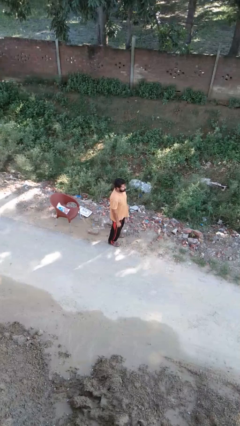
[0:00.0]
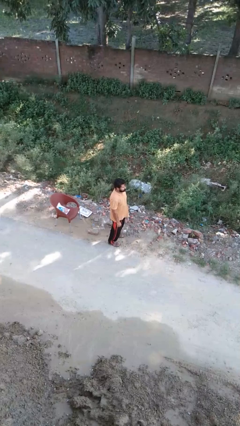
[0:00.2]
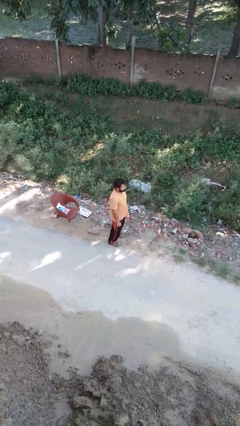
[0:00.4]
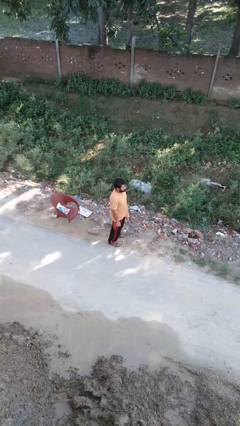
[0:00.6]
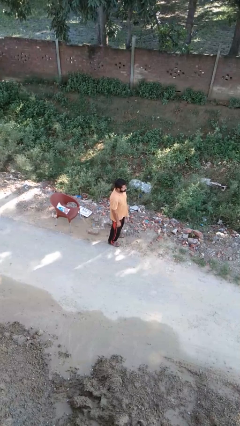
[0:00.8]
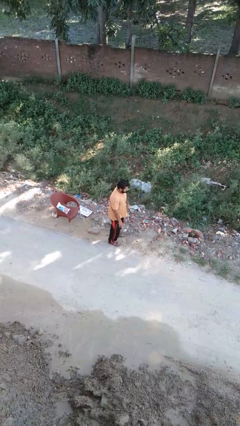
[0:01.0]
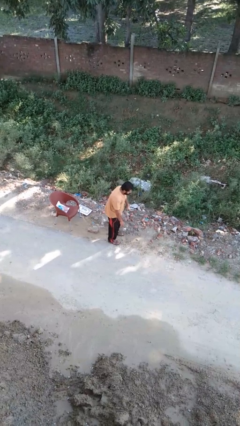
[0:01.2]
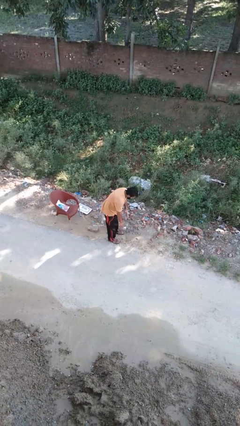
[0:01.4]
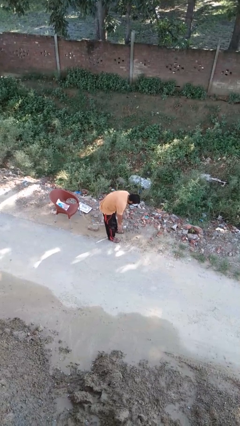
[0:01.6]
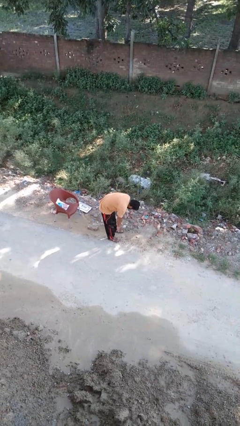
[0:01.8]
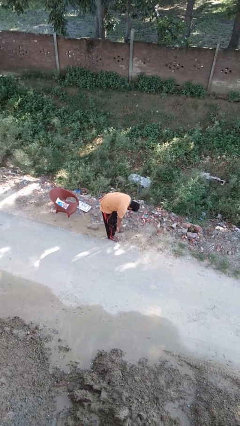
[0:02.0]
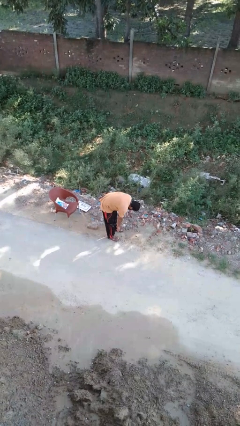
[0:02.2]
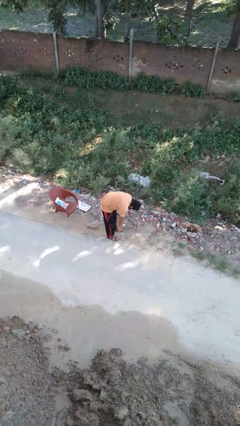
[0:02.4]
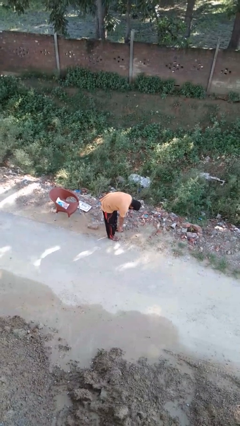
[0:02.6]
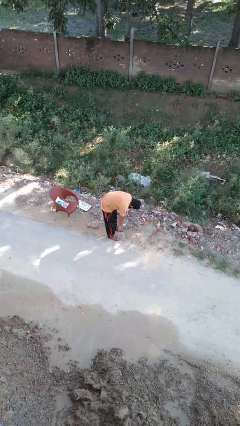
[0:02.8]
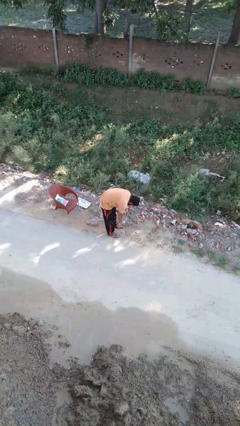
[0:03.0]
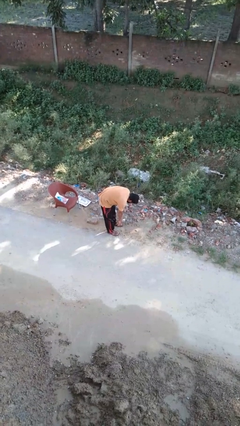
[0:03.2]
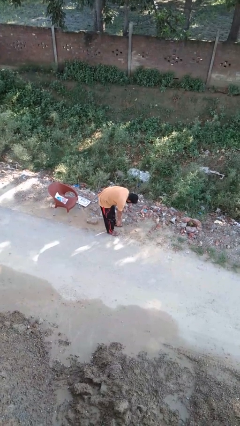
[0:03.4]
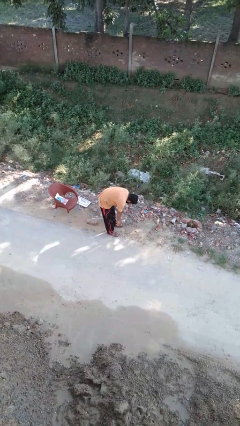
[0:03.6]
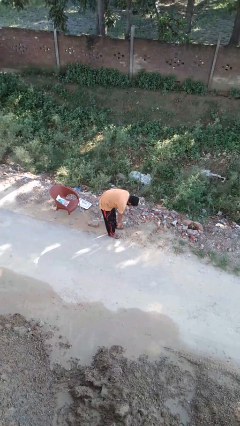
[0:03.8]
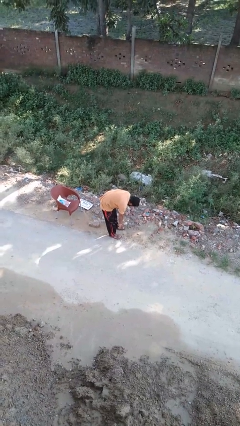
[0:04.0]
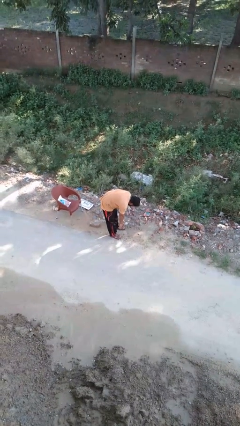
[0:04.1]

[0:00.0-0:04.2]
person bows

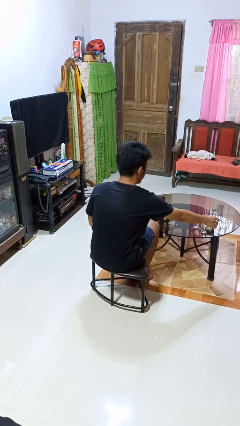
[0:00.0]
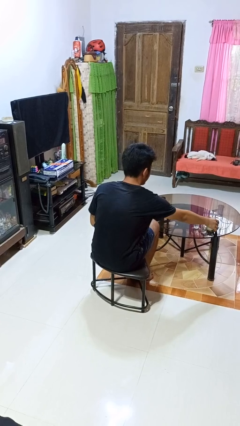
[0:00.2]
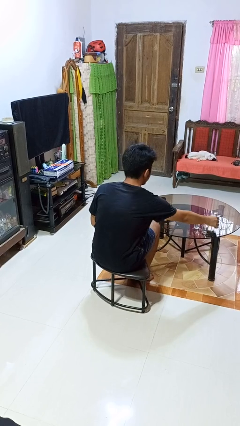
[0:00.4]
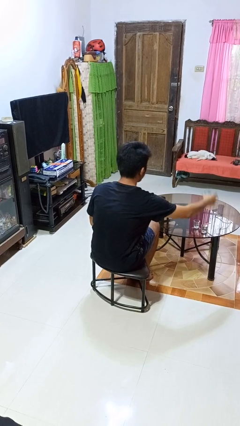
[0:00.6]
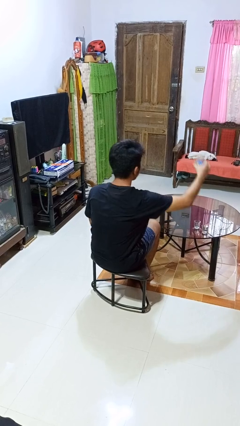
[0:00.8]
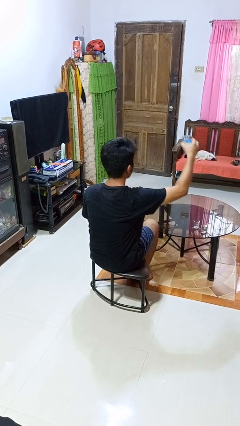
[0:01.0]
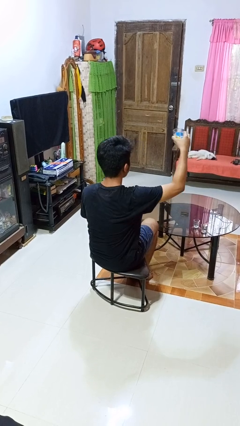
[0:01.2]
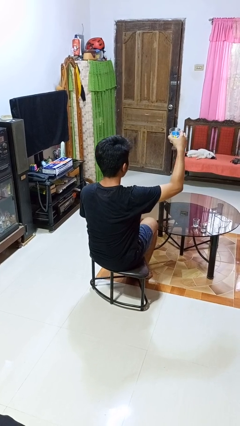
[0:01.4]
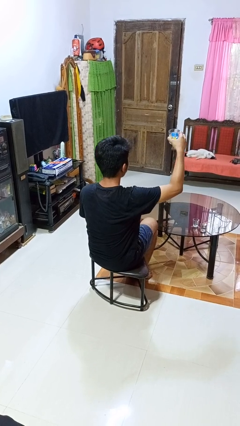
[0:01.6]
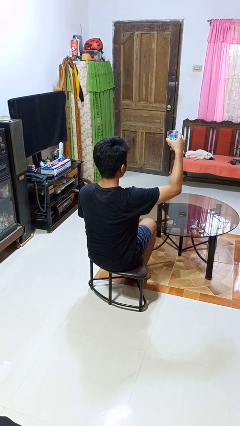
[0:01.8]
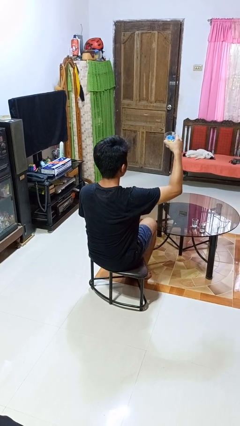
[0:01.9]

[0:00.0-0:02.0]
person picks up object from table

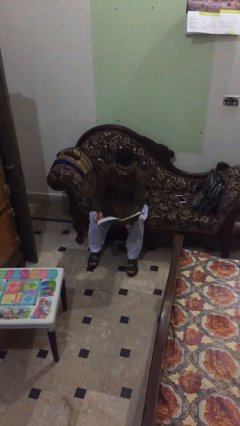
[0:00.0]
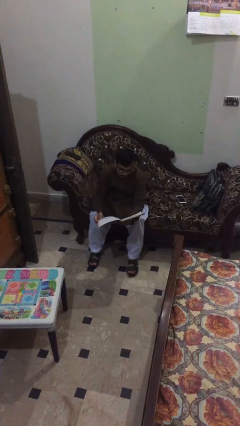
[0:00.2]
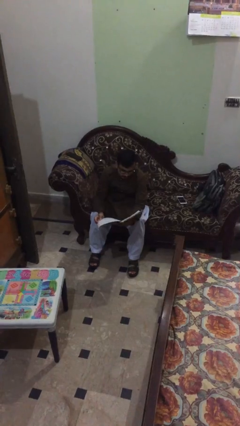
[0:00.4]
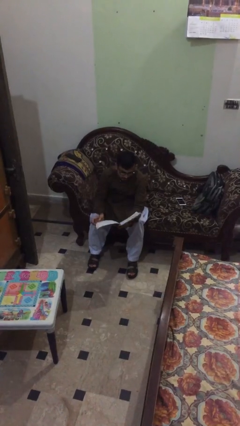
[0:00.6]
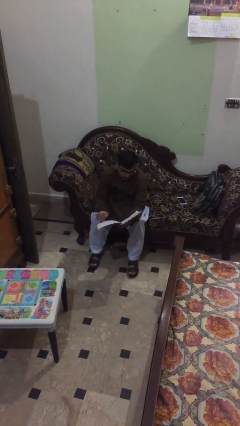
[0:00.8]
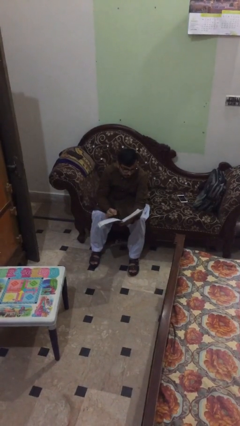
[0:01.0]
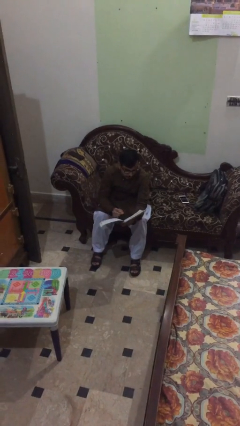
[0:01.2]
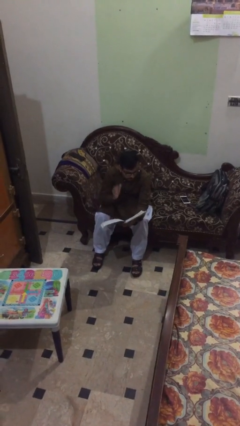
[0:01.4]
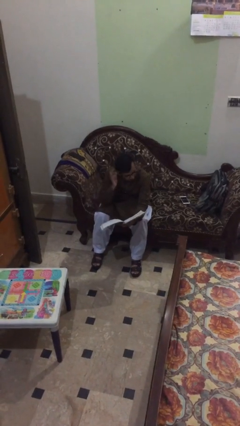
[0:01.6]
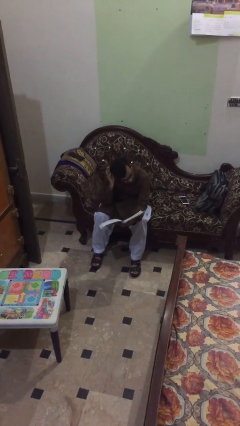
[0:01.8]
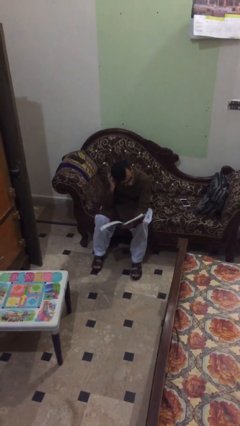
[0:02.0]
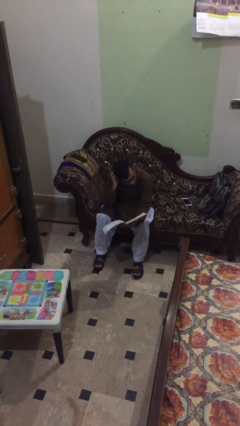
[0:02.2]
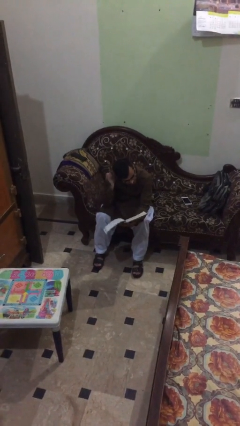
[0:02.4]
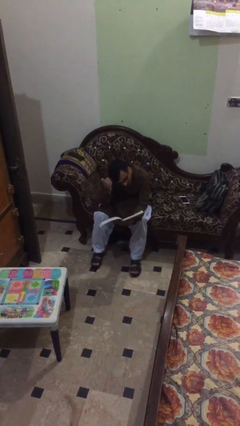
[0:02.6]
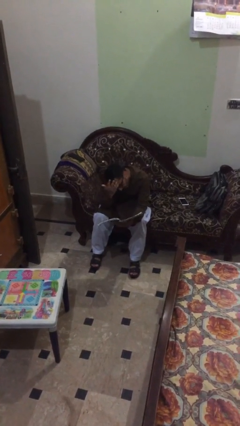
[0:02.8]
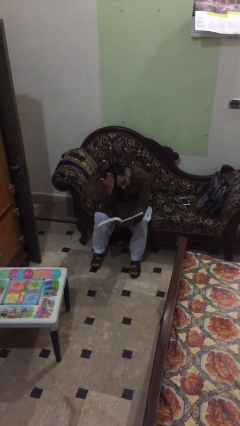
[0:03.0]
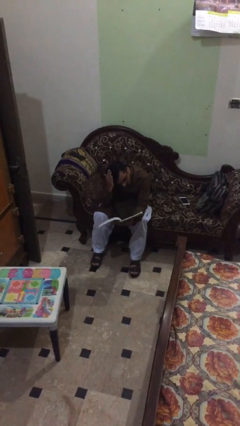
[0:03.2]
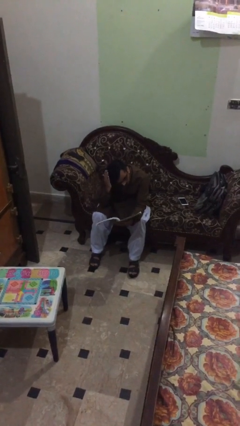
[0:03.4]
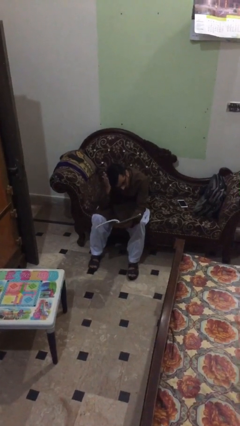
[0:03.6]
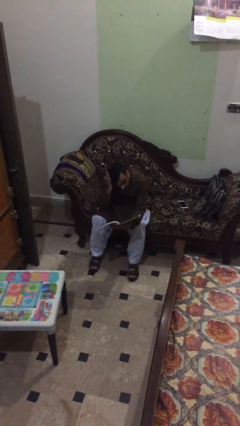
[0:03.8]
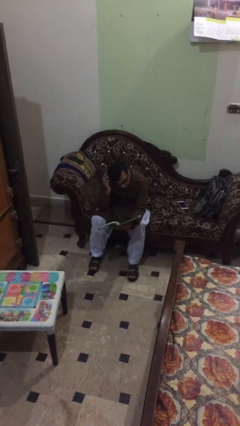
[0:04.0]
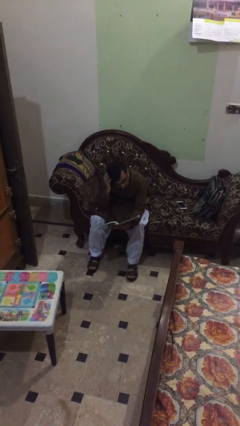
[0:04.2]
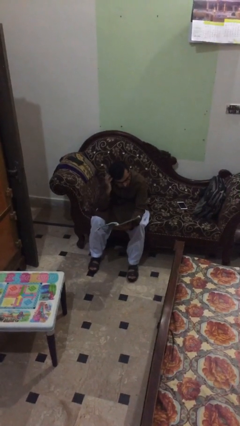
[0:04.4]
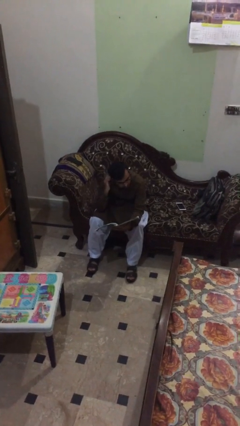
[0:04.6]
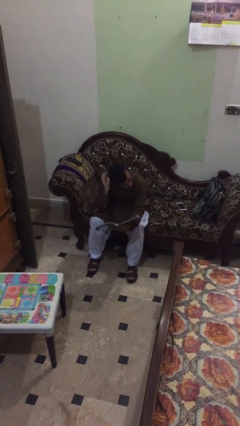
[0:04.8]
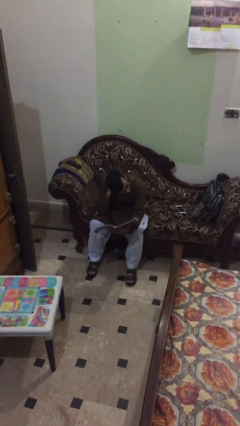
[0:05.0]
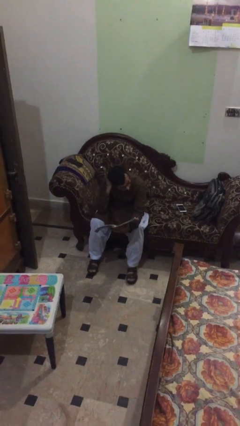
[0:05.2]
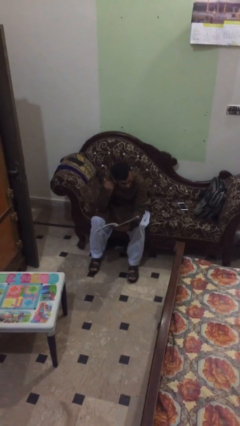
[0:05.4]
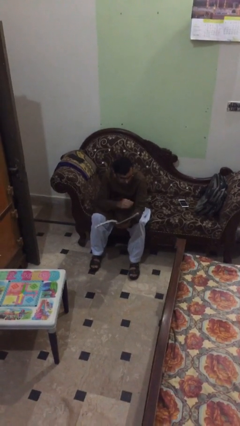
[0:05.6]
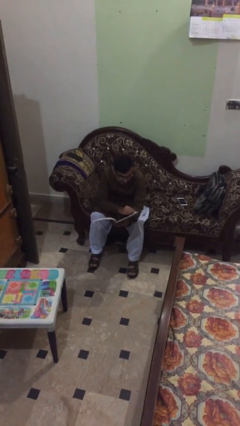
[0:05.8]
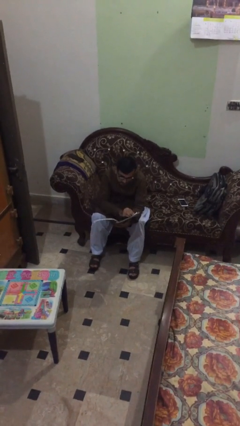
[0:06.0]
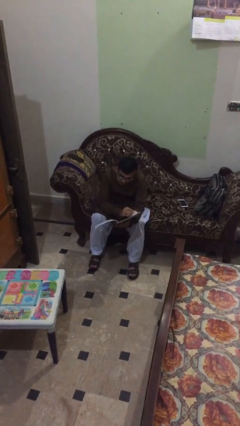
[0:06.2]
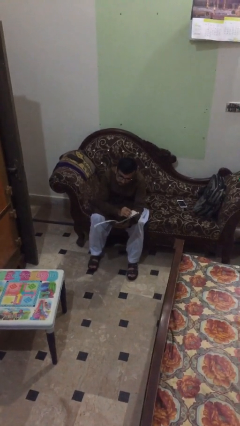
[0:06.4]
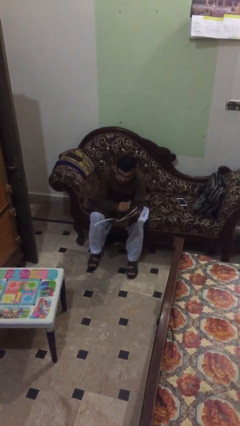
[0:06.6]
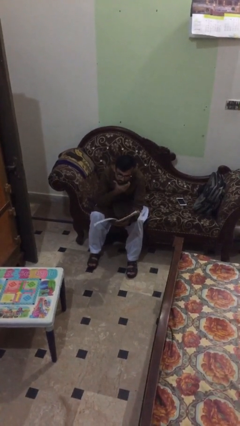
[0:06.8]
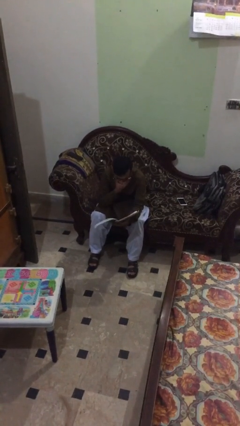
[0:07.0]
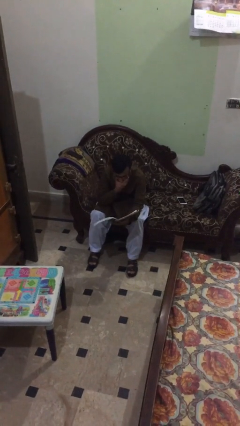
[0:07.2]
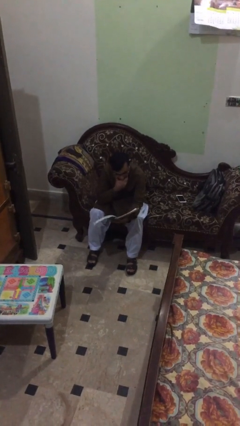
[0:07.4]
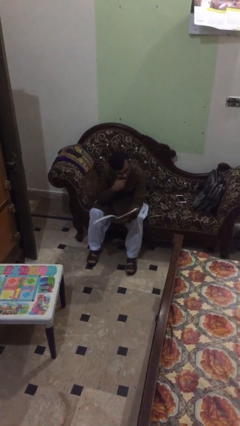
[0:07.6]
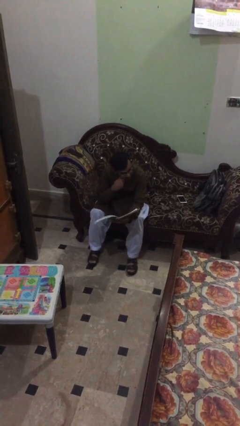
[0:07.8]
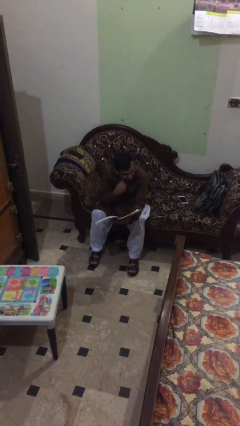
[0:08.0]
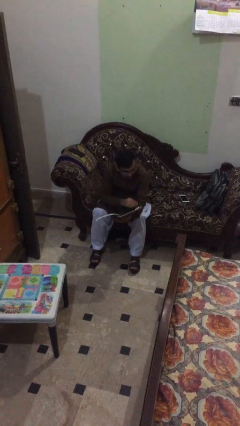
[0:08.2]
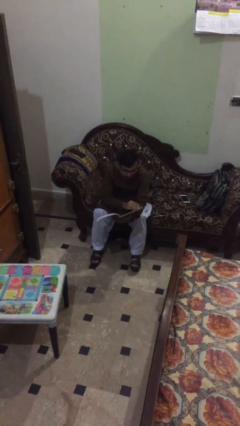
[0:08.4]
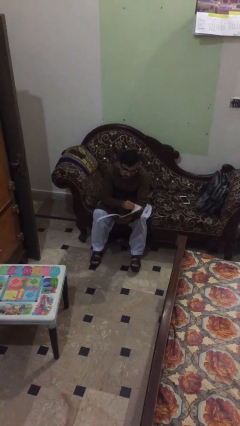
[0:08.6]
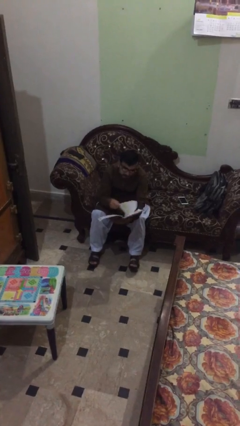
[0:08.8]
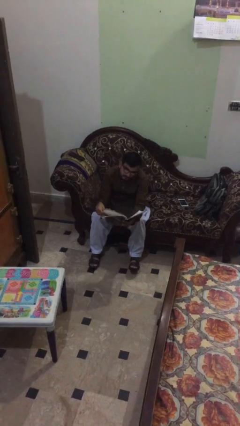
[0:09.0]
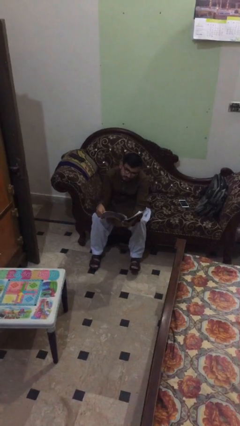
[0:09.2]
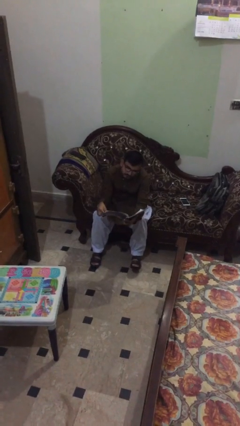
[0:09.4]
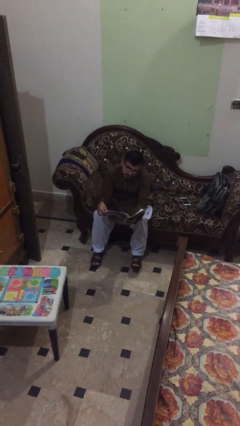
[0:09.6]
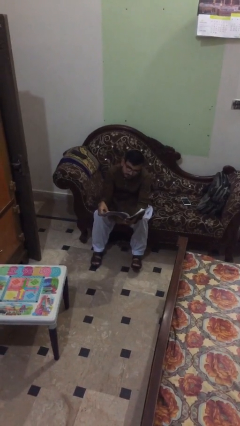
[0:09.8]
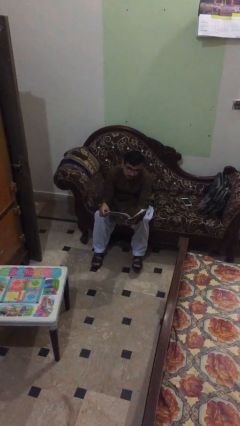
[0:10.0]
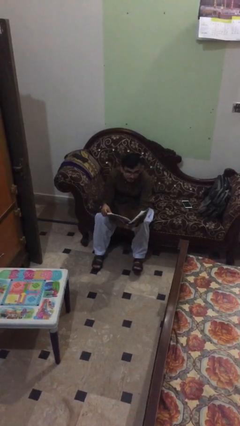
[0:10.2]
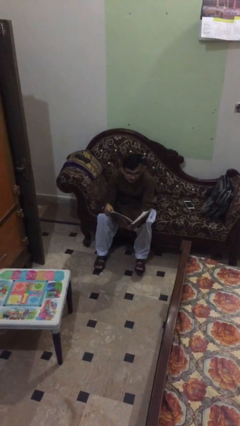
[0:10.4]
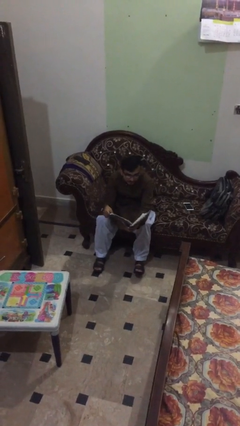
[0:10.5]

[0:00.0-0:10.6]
person reads document

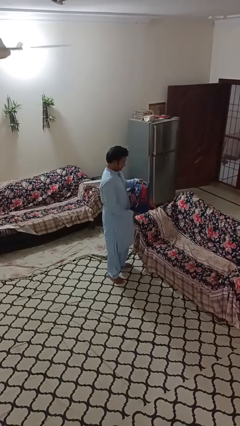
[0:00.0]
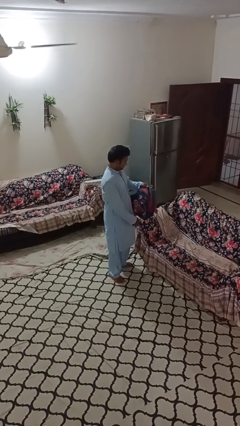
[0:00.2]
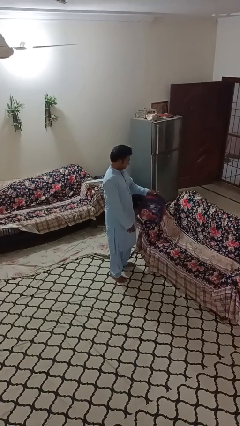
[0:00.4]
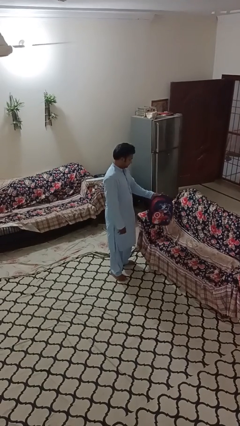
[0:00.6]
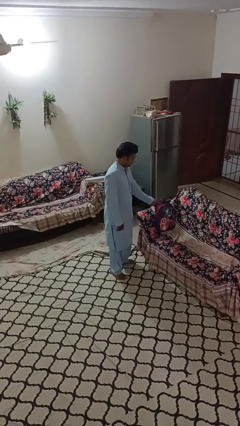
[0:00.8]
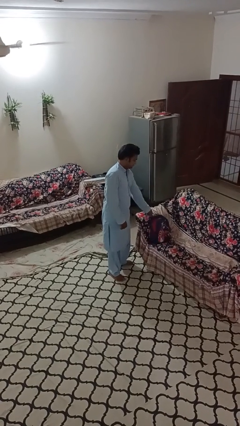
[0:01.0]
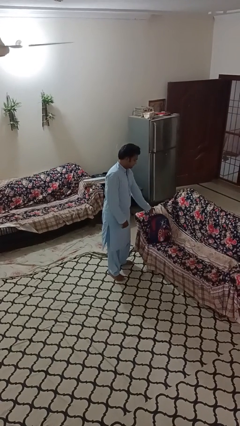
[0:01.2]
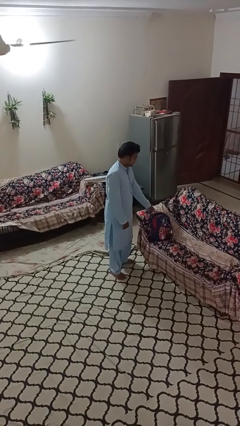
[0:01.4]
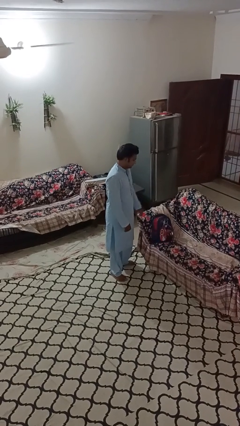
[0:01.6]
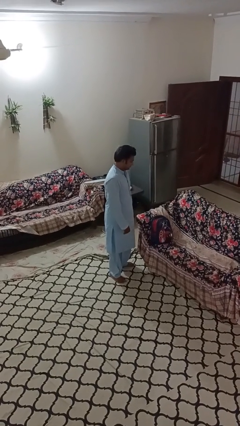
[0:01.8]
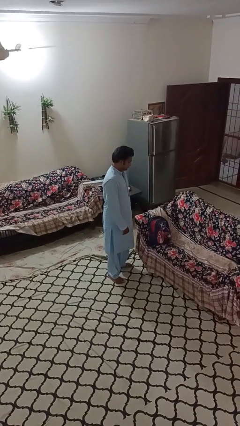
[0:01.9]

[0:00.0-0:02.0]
person puts down object on couch
